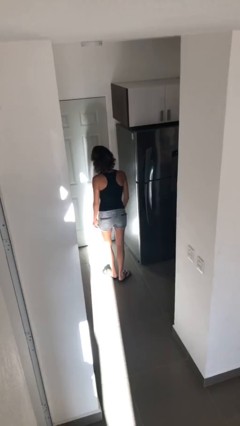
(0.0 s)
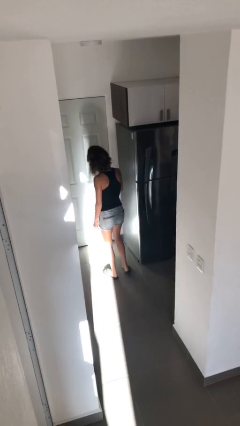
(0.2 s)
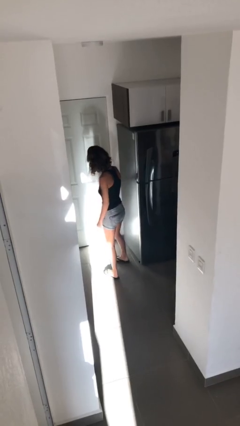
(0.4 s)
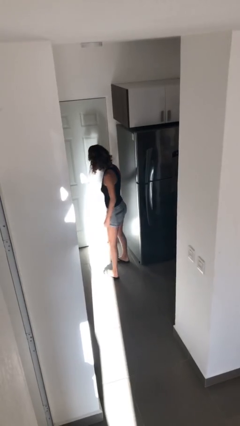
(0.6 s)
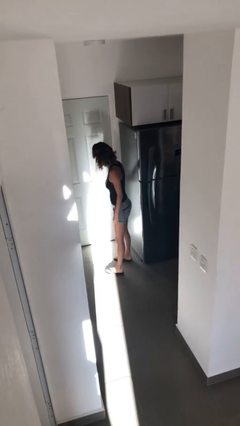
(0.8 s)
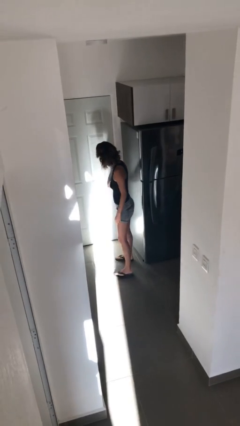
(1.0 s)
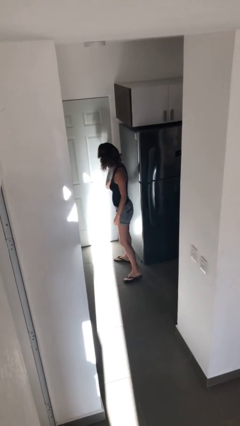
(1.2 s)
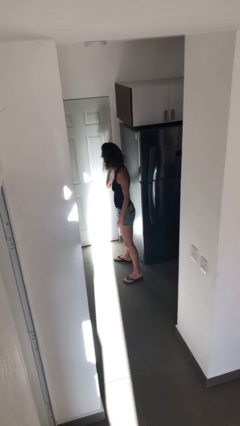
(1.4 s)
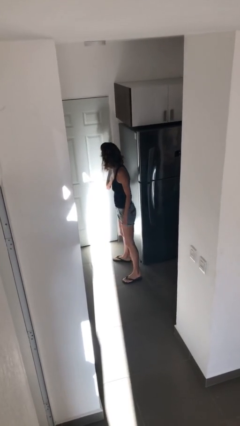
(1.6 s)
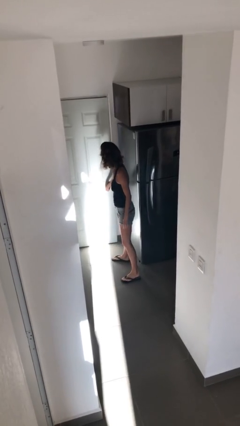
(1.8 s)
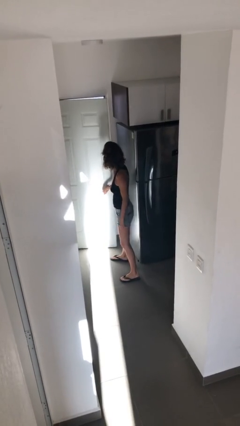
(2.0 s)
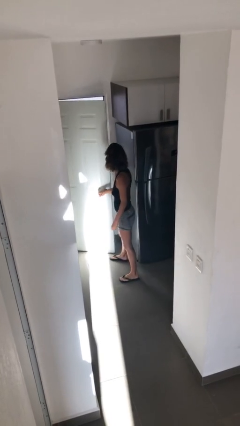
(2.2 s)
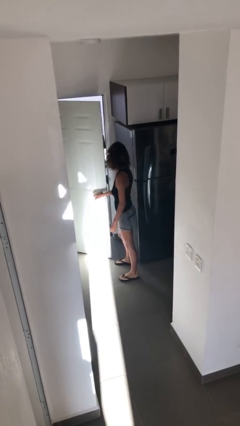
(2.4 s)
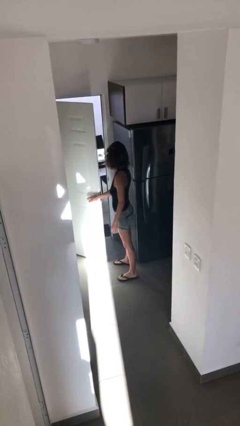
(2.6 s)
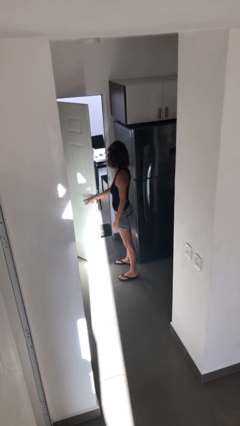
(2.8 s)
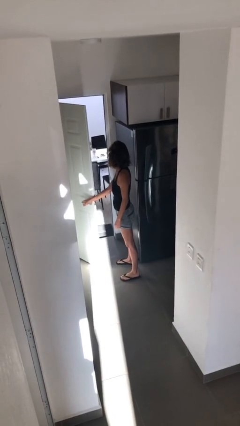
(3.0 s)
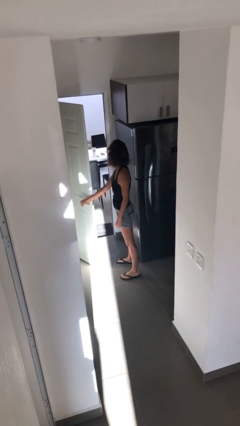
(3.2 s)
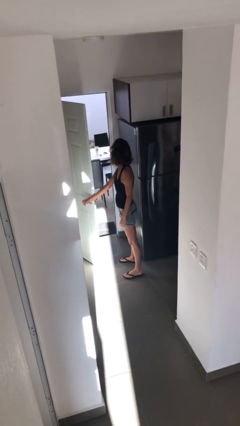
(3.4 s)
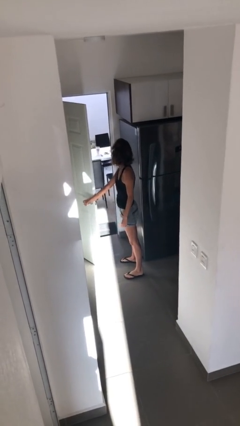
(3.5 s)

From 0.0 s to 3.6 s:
person opens facility door

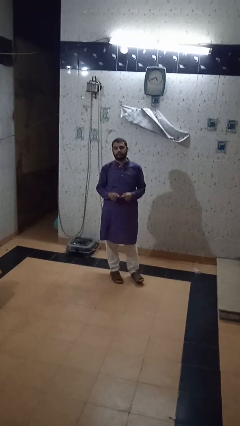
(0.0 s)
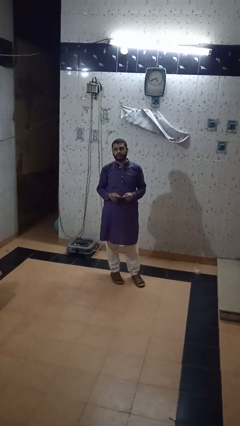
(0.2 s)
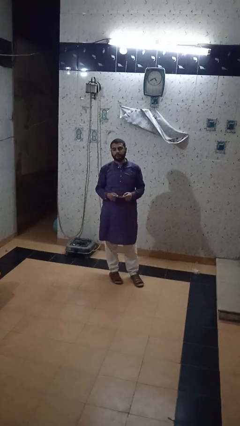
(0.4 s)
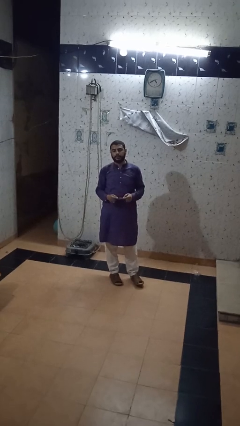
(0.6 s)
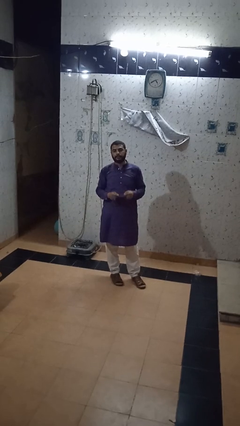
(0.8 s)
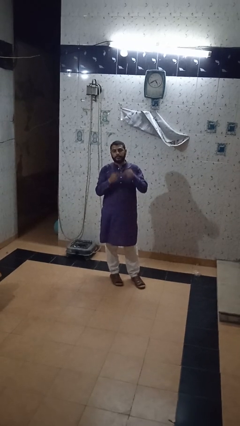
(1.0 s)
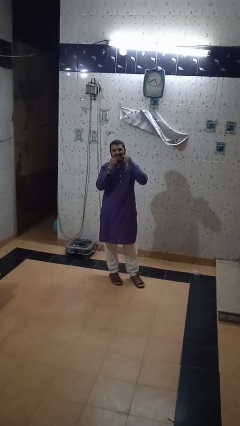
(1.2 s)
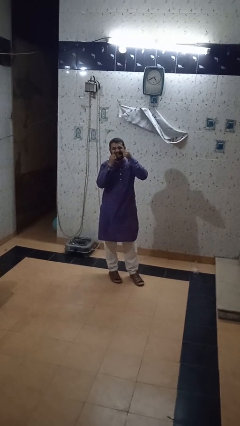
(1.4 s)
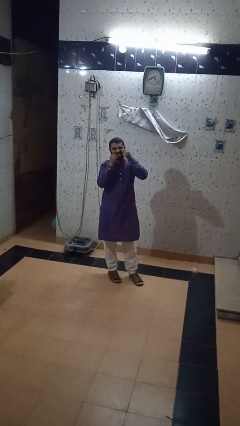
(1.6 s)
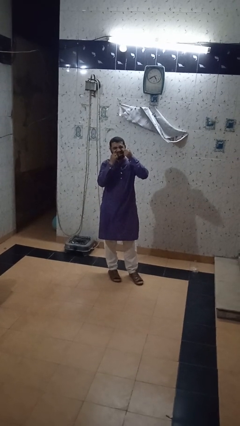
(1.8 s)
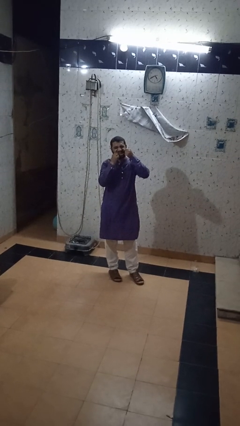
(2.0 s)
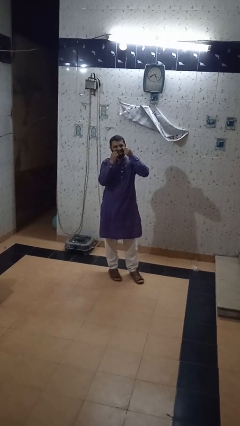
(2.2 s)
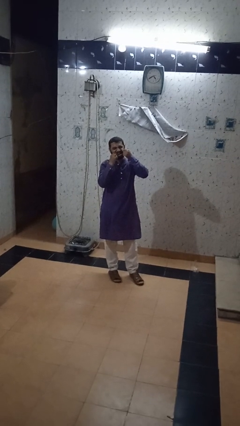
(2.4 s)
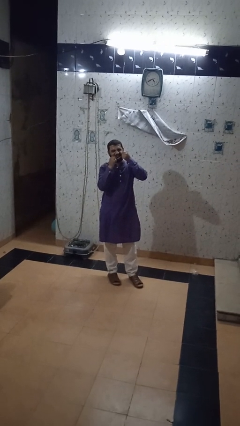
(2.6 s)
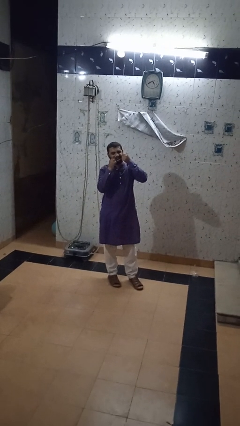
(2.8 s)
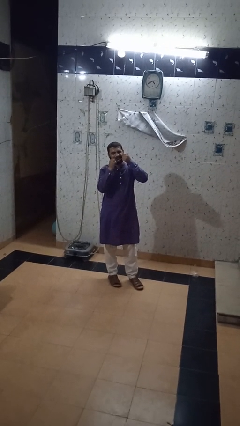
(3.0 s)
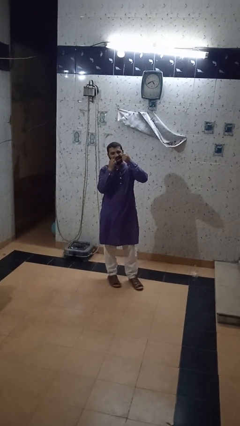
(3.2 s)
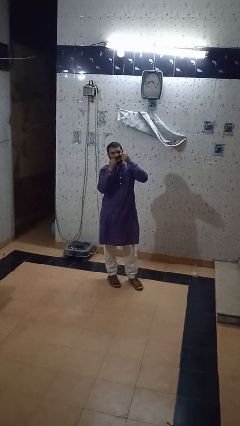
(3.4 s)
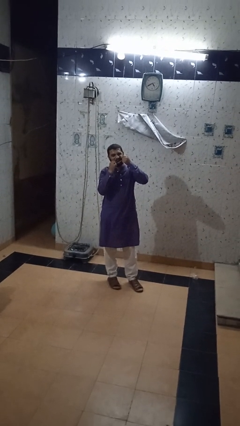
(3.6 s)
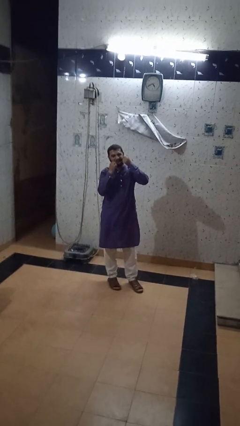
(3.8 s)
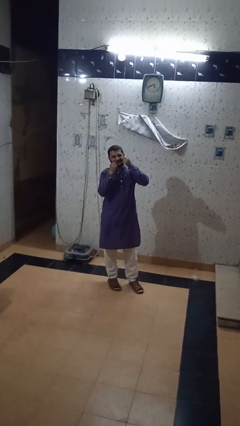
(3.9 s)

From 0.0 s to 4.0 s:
person flosses

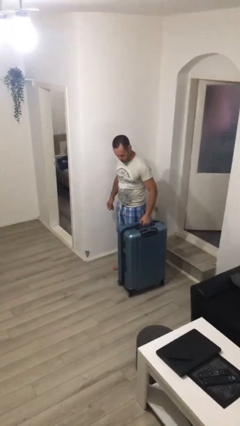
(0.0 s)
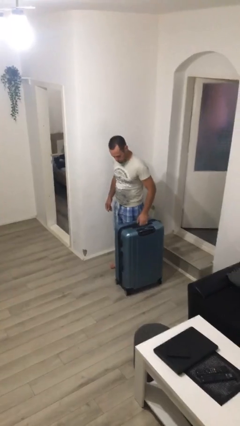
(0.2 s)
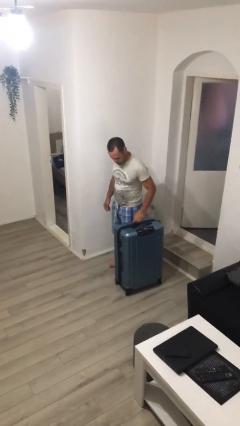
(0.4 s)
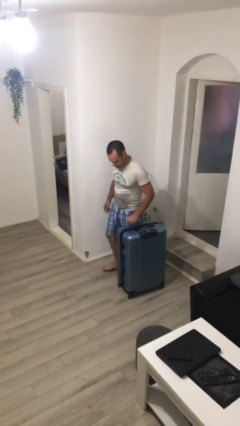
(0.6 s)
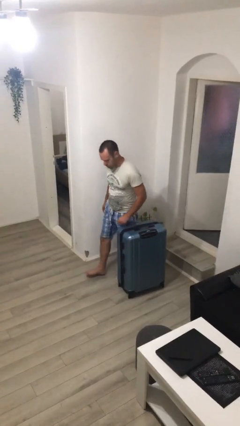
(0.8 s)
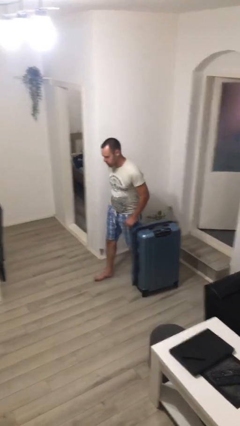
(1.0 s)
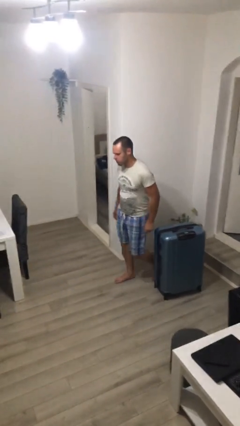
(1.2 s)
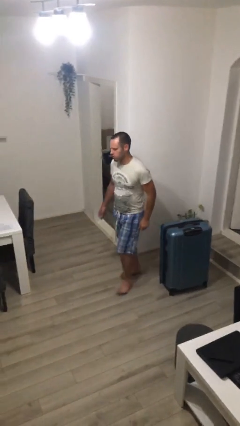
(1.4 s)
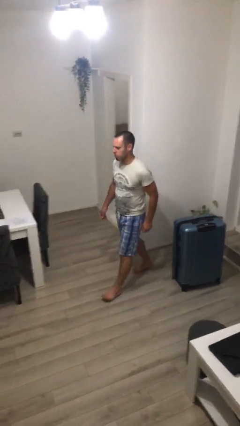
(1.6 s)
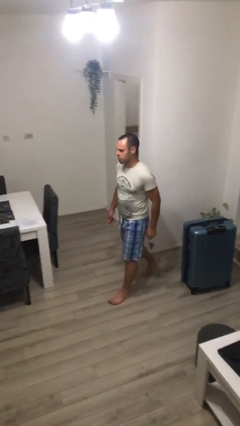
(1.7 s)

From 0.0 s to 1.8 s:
person puts down object on floor

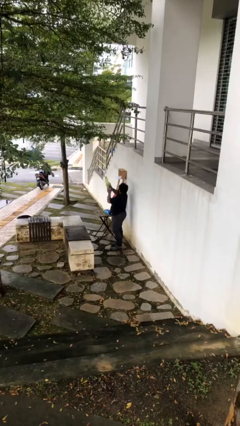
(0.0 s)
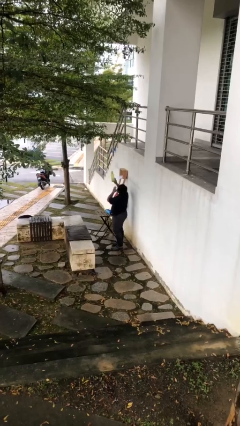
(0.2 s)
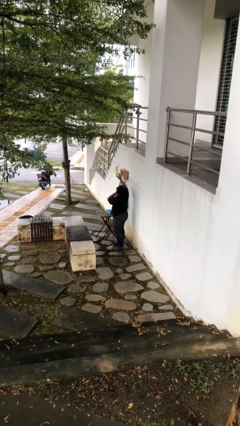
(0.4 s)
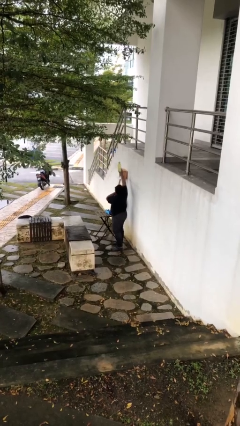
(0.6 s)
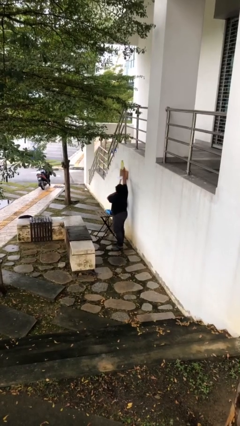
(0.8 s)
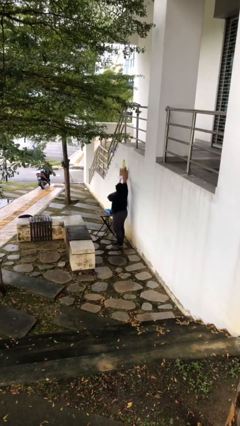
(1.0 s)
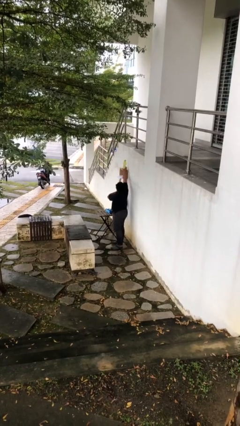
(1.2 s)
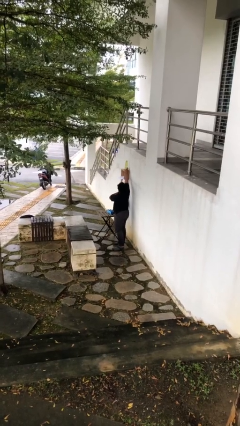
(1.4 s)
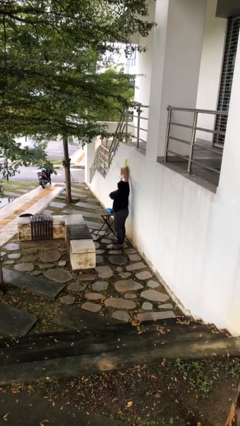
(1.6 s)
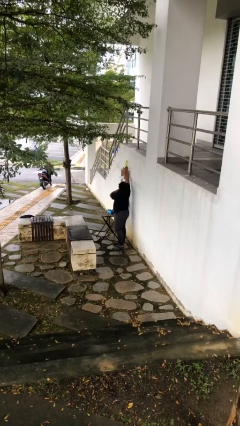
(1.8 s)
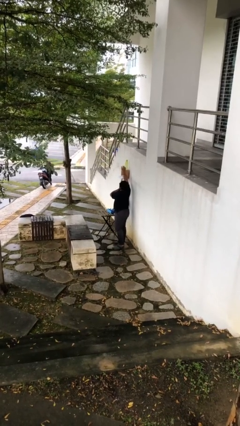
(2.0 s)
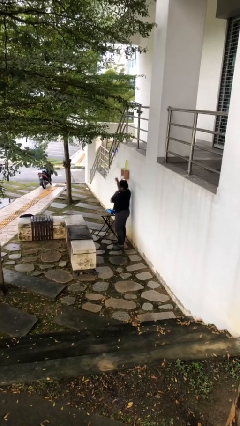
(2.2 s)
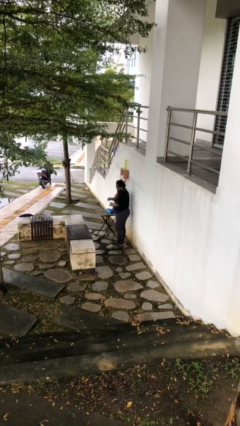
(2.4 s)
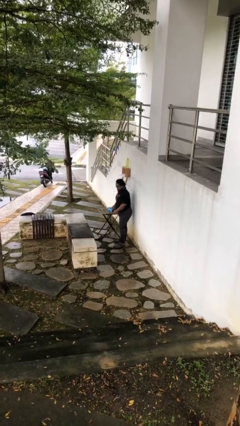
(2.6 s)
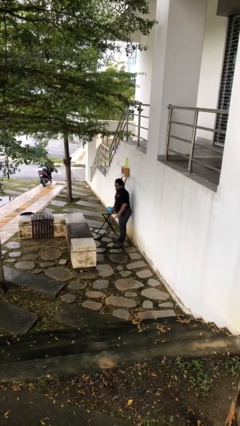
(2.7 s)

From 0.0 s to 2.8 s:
person puts down object on shelf

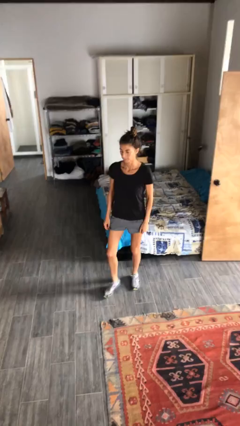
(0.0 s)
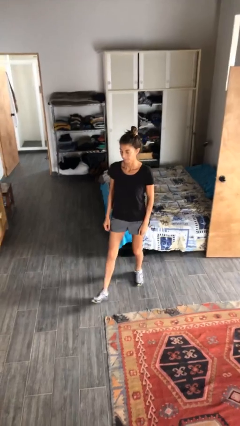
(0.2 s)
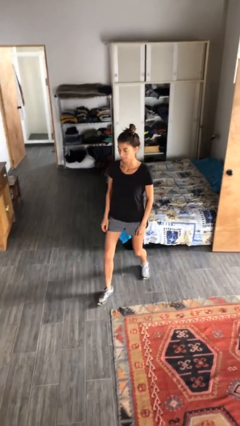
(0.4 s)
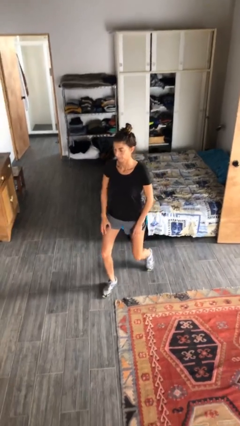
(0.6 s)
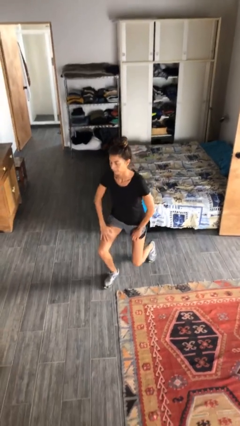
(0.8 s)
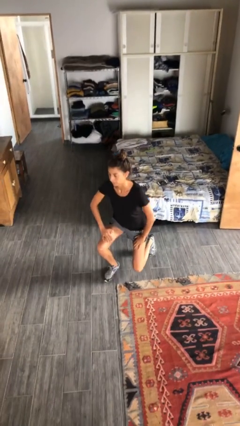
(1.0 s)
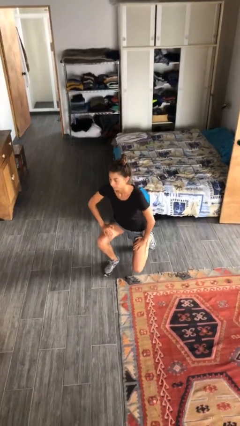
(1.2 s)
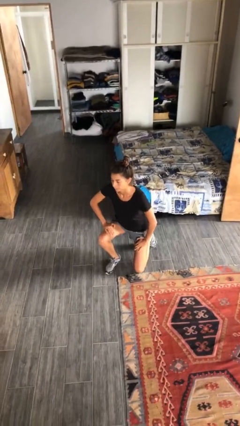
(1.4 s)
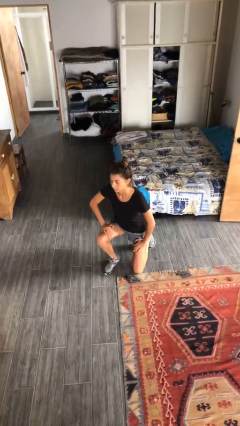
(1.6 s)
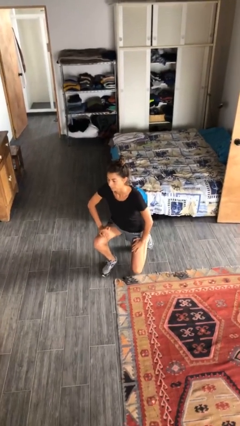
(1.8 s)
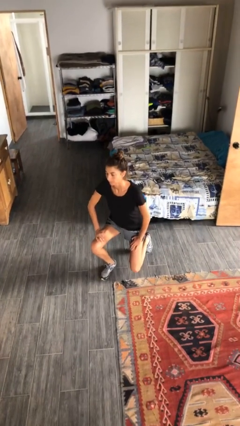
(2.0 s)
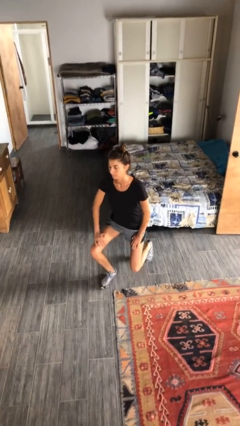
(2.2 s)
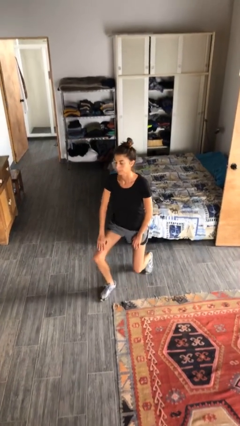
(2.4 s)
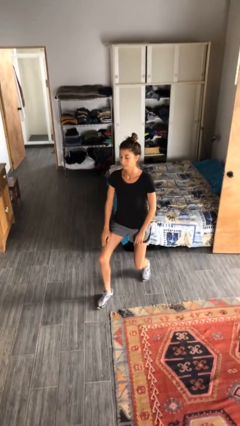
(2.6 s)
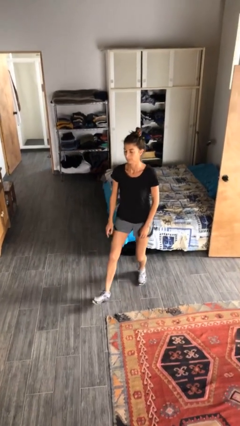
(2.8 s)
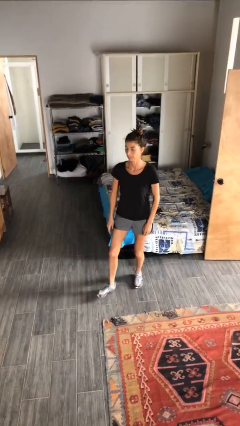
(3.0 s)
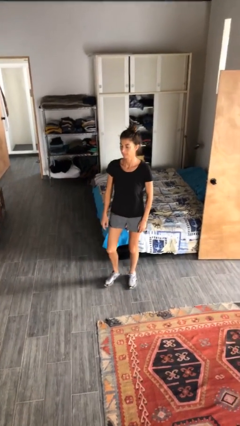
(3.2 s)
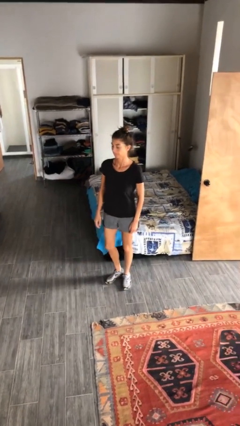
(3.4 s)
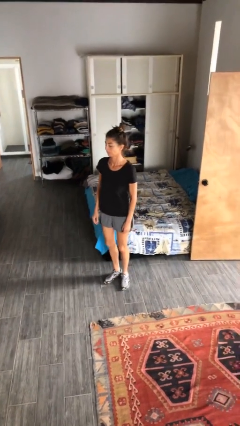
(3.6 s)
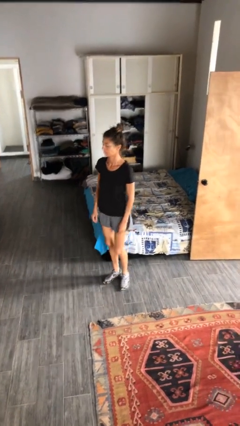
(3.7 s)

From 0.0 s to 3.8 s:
person exercises with lunges

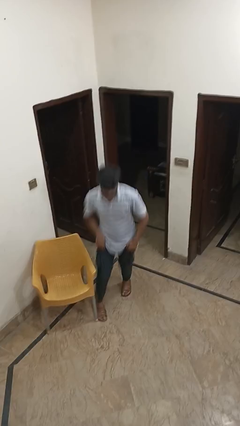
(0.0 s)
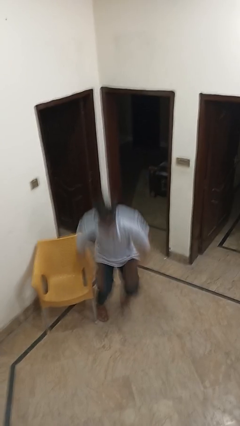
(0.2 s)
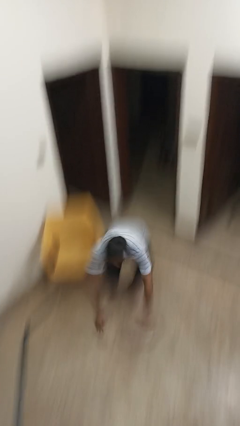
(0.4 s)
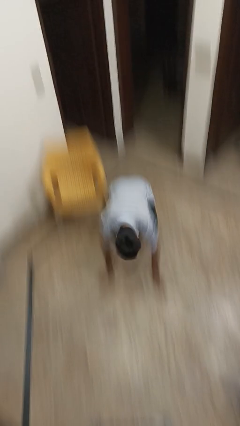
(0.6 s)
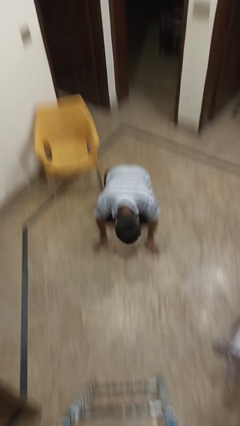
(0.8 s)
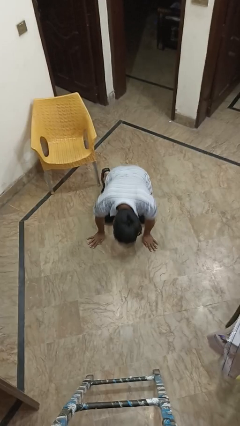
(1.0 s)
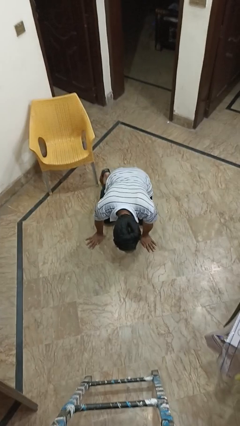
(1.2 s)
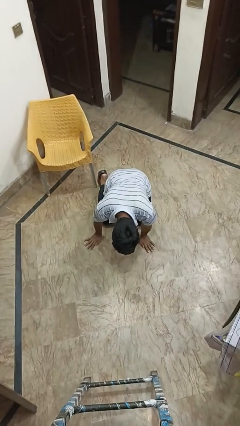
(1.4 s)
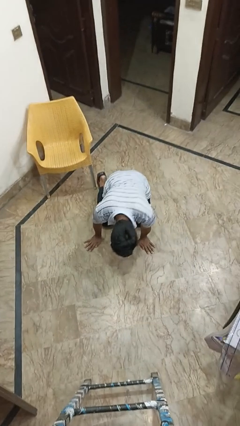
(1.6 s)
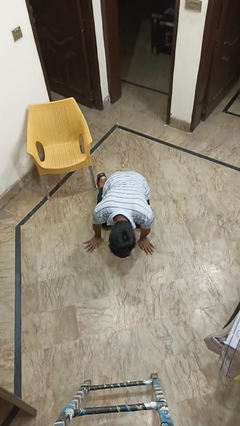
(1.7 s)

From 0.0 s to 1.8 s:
person trips on object on floor
